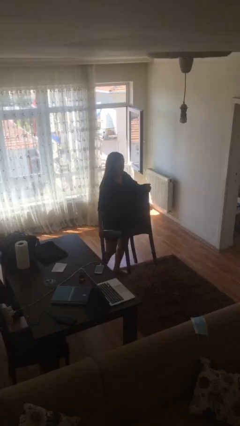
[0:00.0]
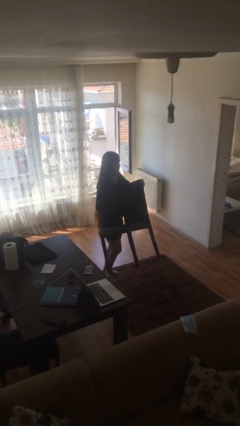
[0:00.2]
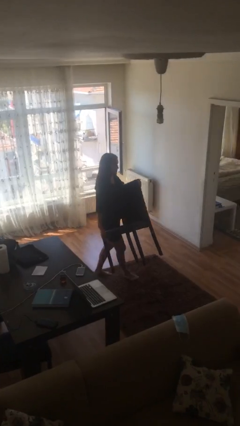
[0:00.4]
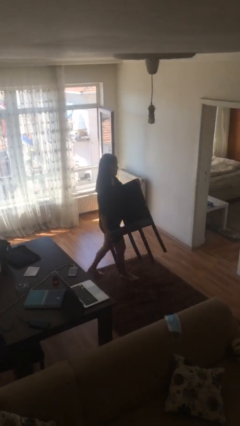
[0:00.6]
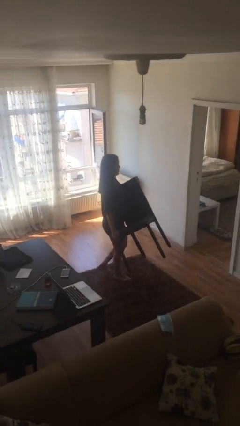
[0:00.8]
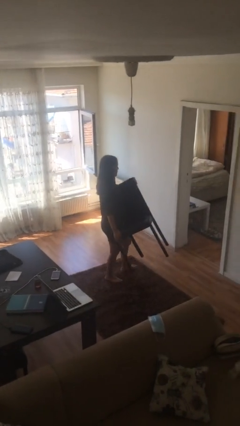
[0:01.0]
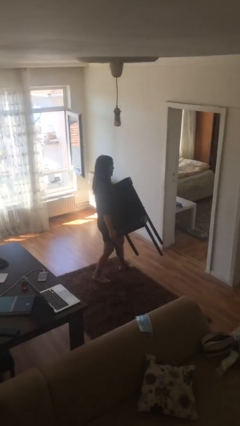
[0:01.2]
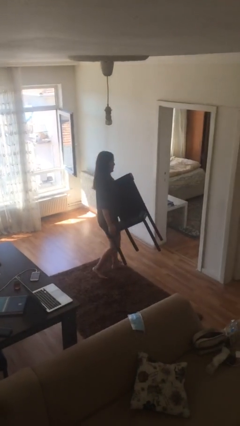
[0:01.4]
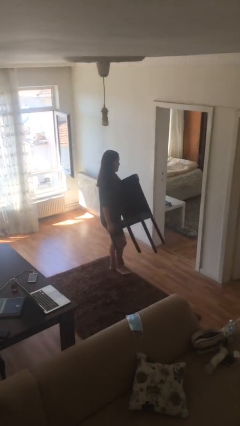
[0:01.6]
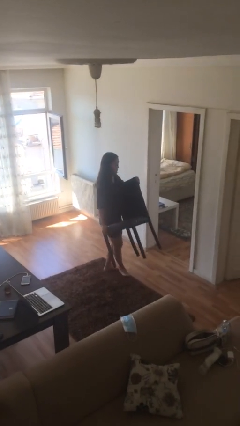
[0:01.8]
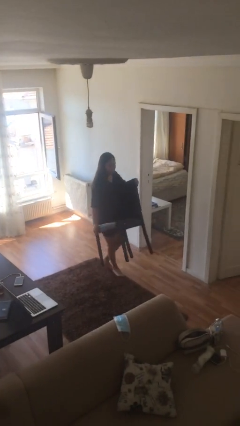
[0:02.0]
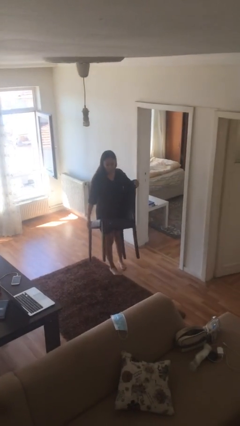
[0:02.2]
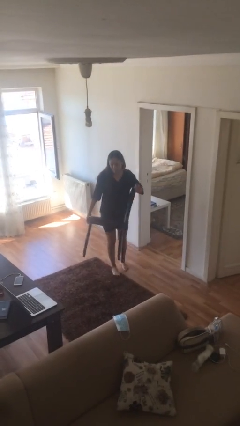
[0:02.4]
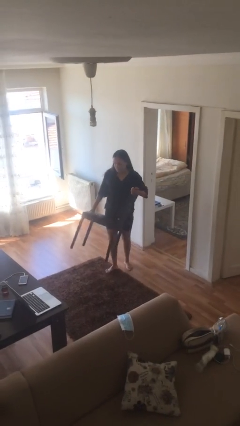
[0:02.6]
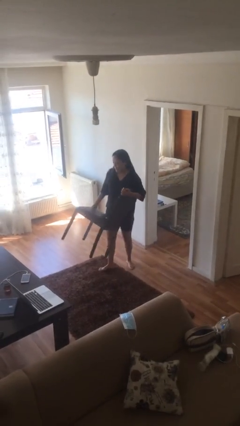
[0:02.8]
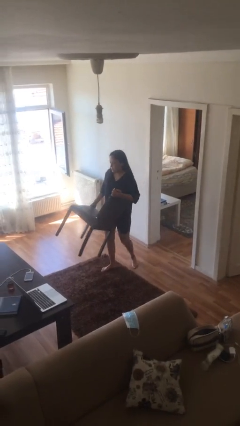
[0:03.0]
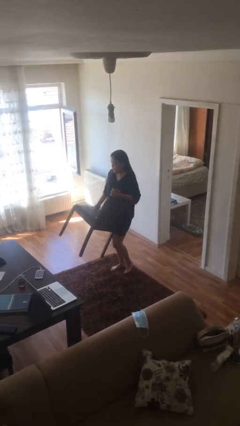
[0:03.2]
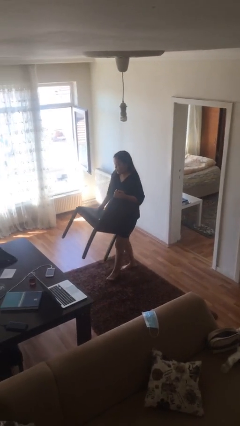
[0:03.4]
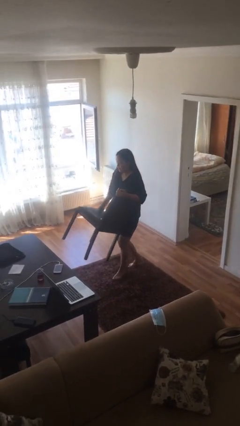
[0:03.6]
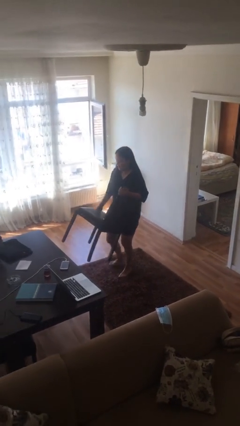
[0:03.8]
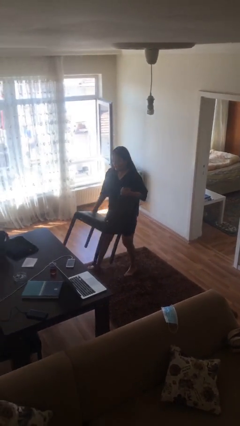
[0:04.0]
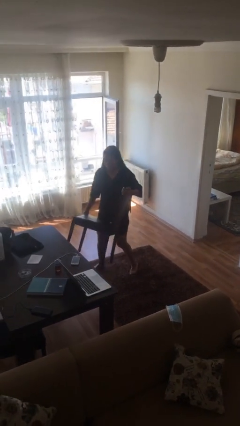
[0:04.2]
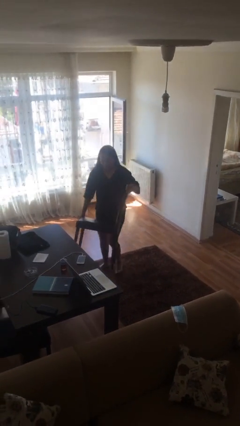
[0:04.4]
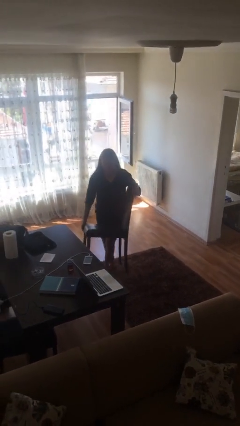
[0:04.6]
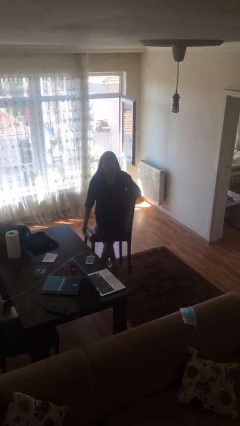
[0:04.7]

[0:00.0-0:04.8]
person carries heavy object

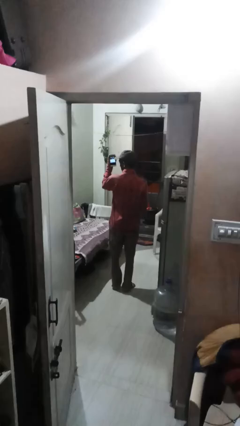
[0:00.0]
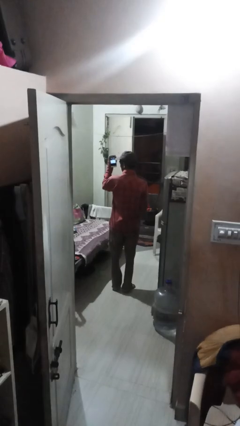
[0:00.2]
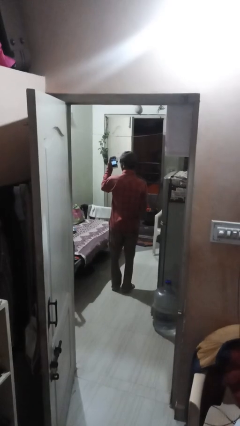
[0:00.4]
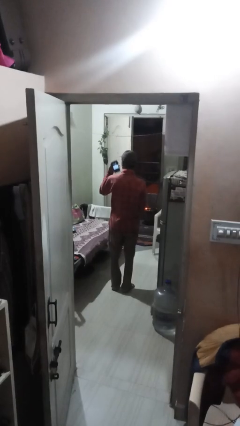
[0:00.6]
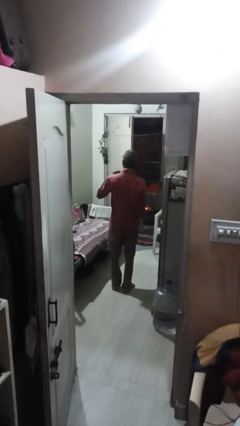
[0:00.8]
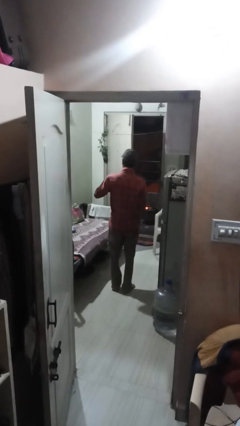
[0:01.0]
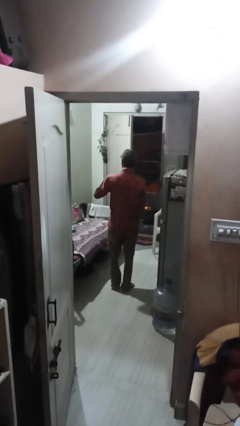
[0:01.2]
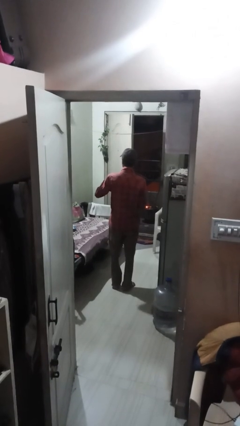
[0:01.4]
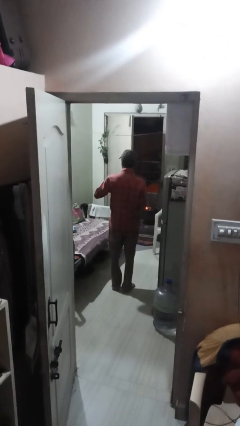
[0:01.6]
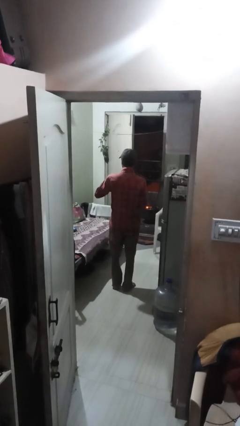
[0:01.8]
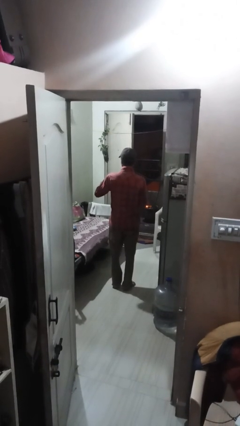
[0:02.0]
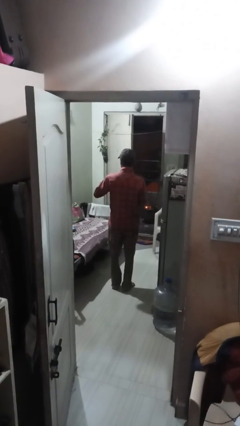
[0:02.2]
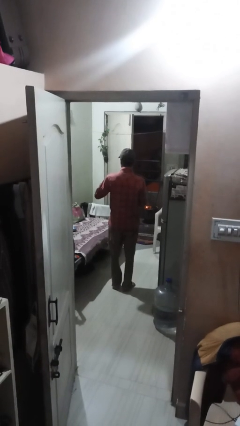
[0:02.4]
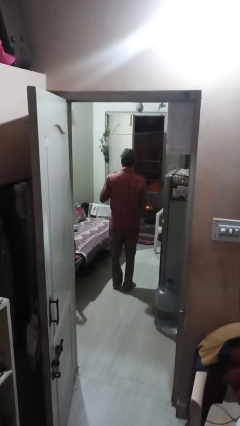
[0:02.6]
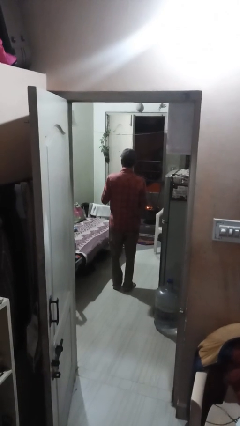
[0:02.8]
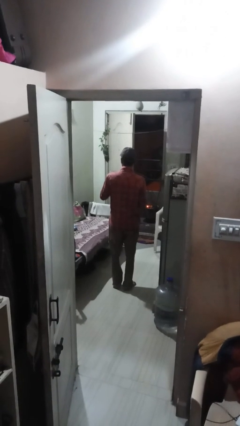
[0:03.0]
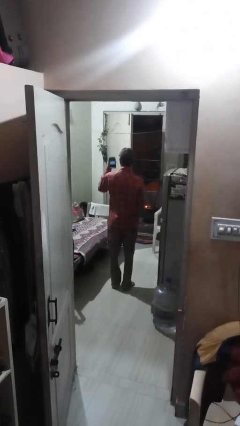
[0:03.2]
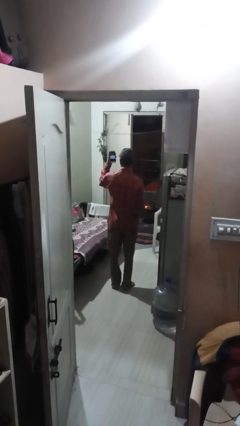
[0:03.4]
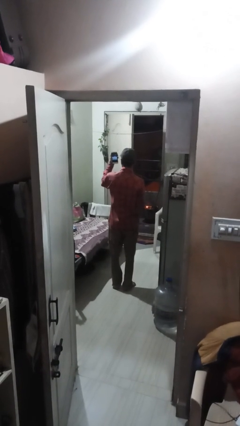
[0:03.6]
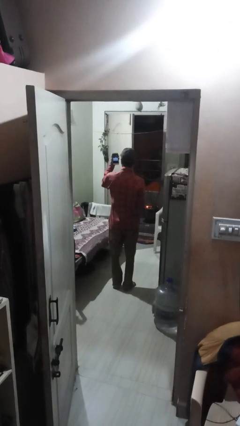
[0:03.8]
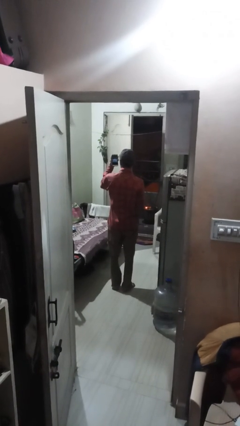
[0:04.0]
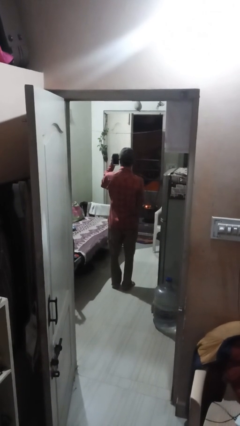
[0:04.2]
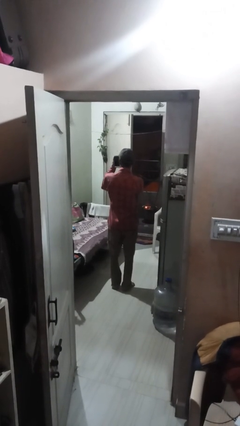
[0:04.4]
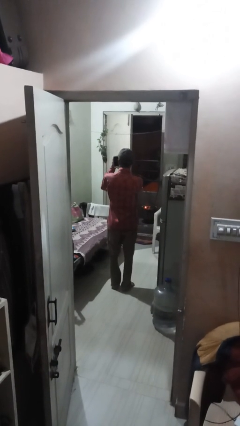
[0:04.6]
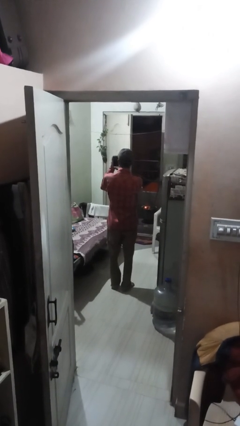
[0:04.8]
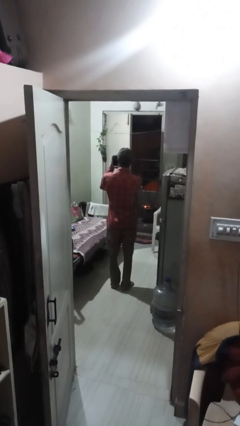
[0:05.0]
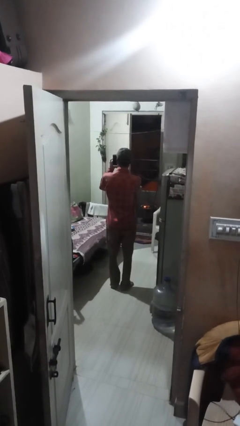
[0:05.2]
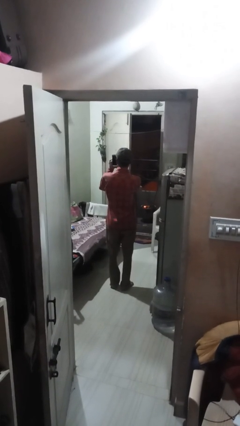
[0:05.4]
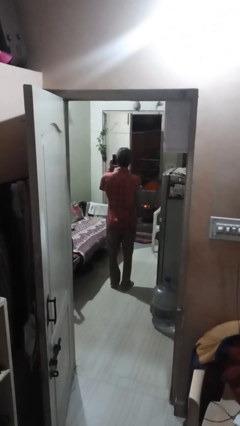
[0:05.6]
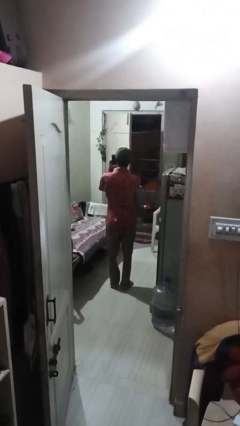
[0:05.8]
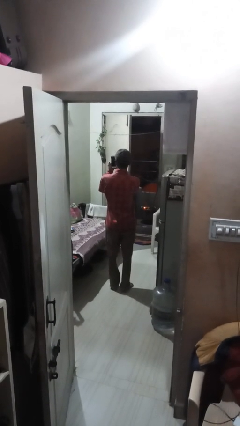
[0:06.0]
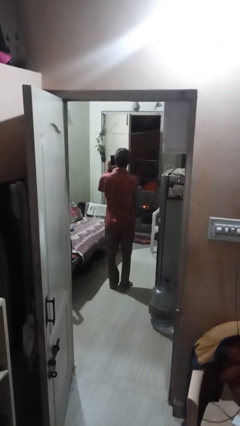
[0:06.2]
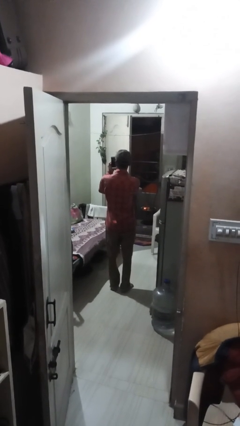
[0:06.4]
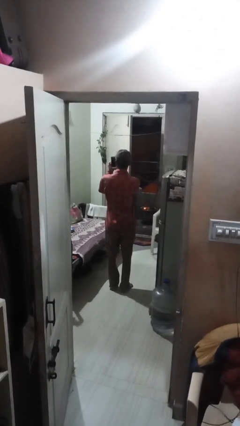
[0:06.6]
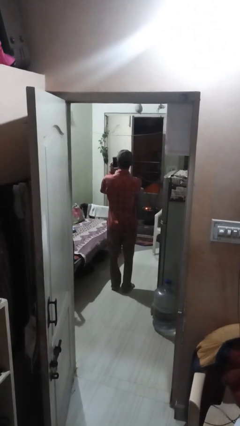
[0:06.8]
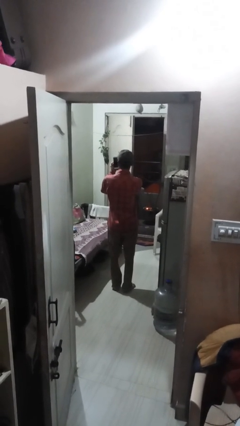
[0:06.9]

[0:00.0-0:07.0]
person takes phone from pocket

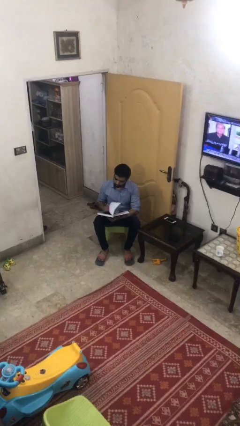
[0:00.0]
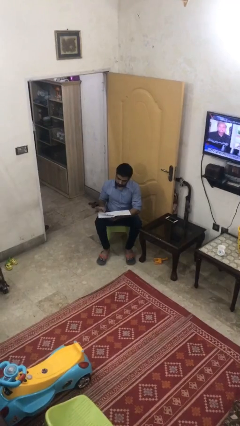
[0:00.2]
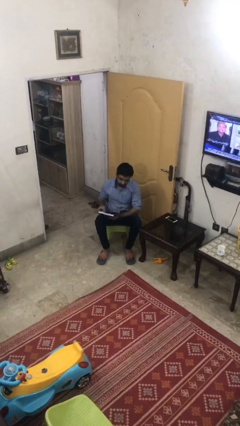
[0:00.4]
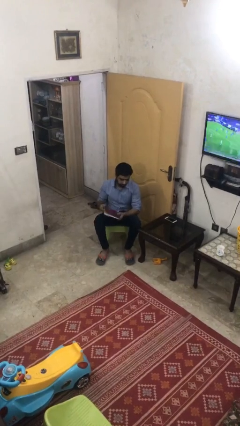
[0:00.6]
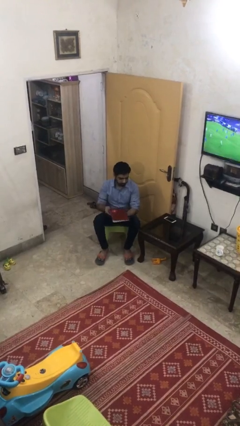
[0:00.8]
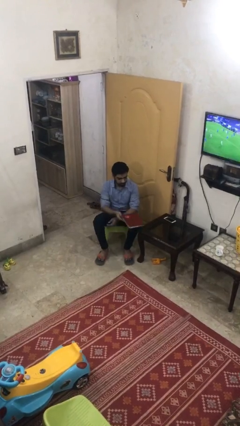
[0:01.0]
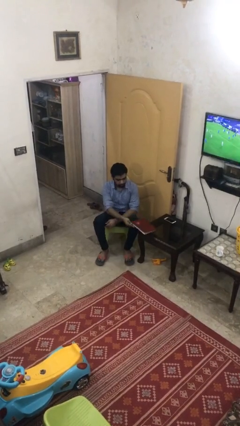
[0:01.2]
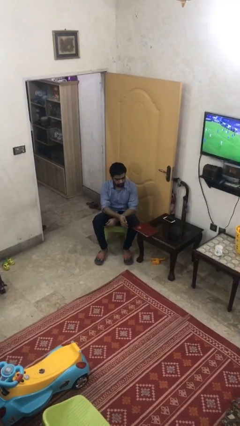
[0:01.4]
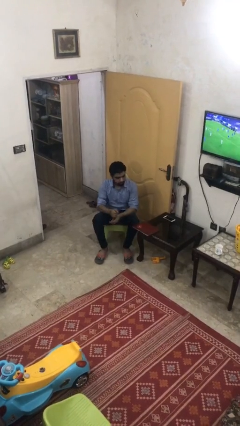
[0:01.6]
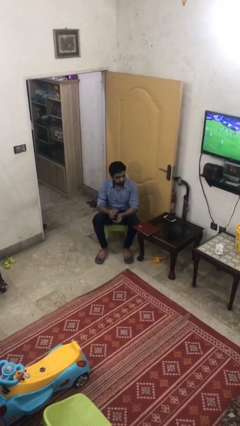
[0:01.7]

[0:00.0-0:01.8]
person puts down object on table

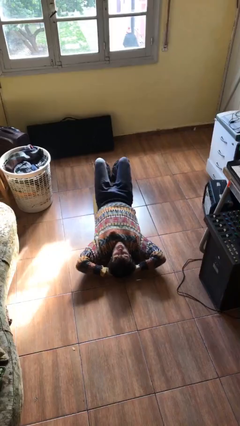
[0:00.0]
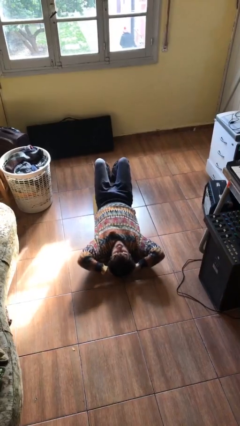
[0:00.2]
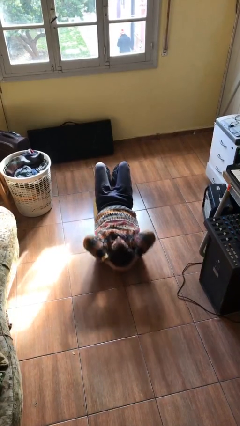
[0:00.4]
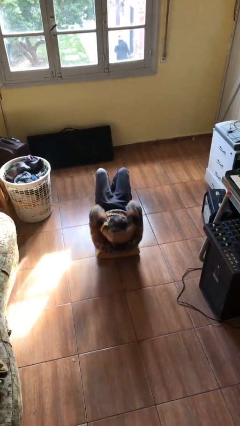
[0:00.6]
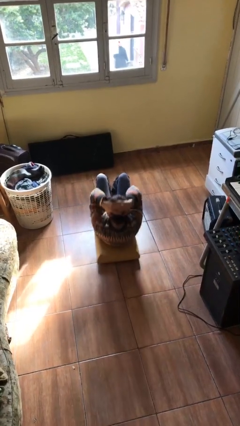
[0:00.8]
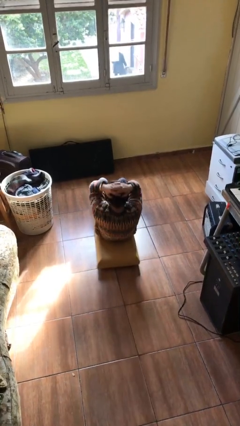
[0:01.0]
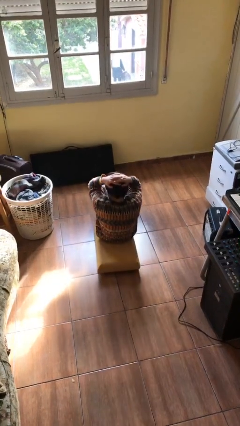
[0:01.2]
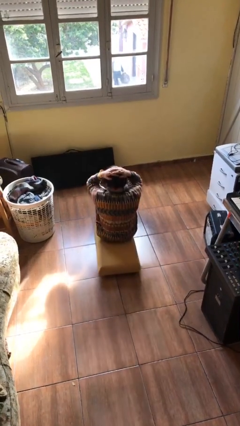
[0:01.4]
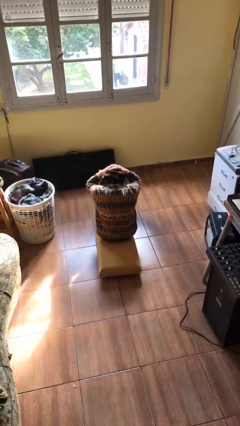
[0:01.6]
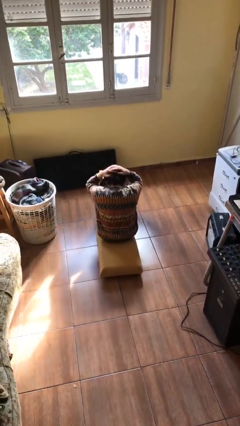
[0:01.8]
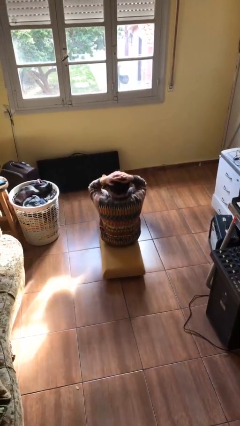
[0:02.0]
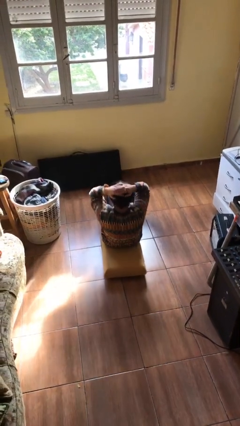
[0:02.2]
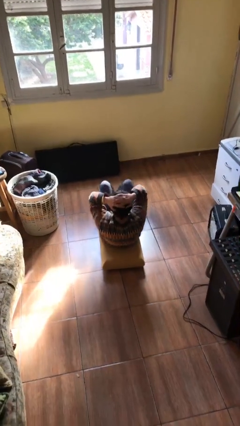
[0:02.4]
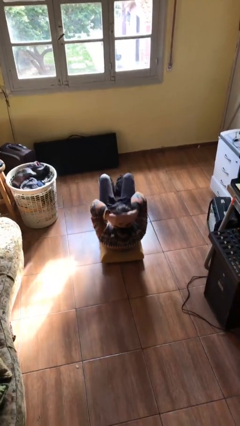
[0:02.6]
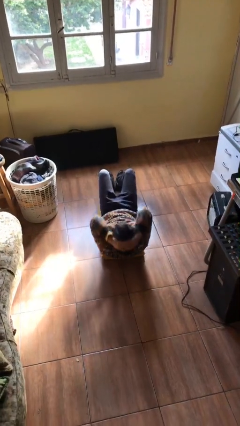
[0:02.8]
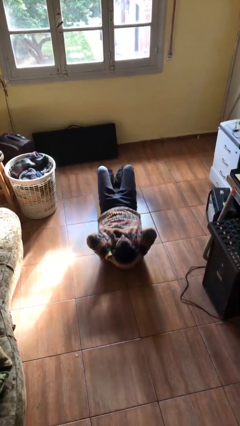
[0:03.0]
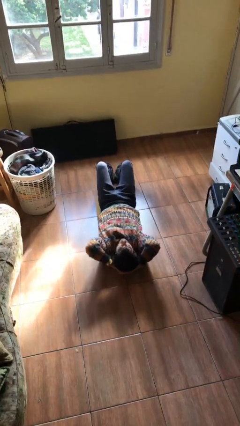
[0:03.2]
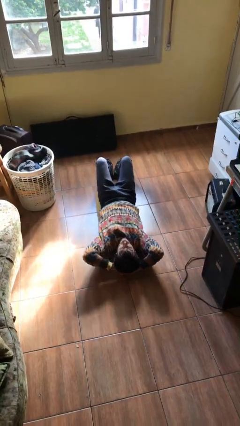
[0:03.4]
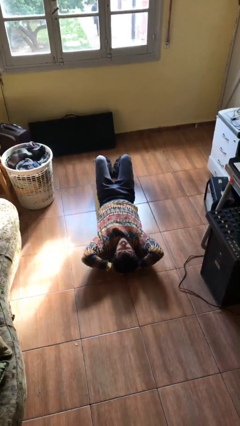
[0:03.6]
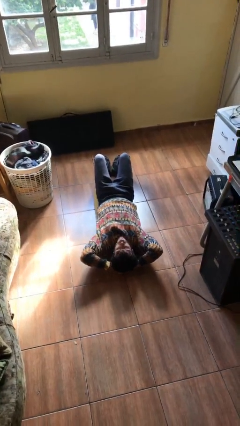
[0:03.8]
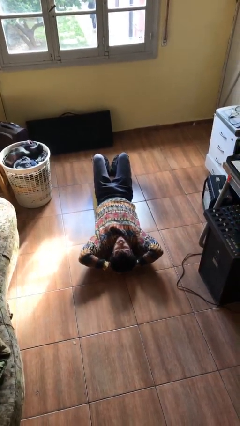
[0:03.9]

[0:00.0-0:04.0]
person exercises with situp

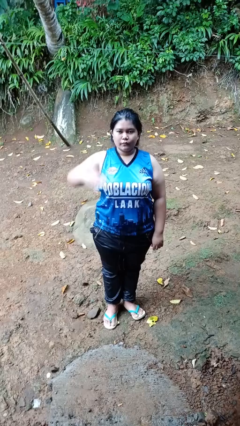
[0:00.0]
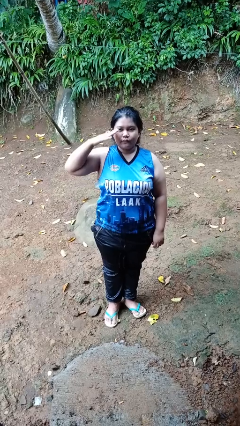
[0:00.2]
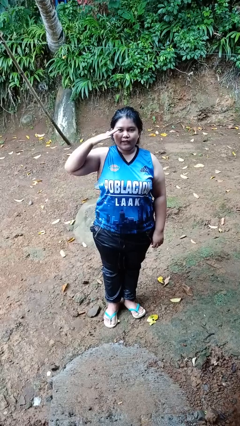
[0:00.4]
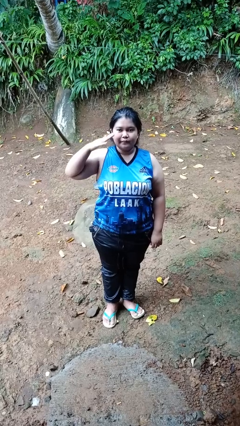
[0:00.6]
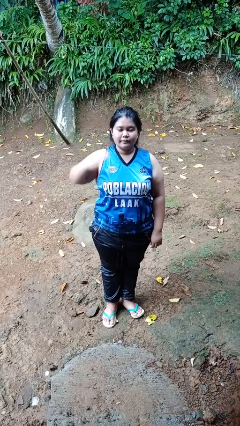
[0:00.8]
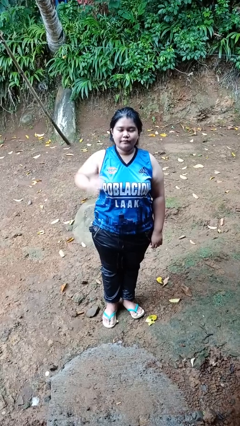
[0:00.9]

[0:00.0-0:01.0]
person salutes
